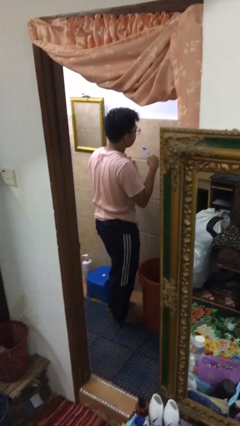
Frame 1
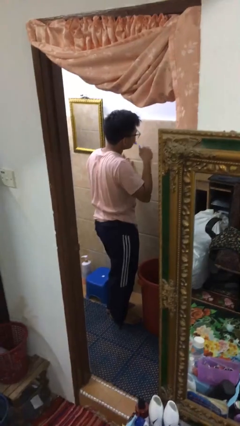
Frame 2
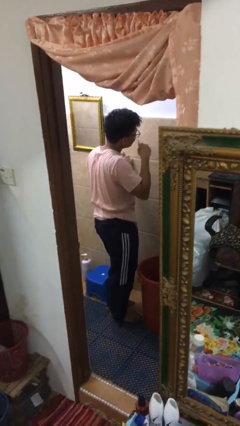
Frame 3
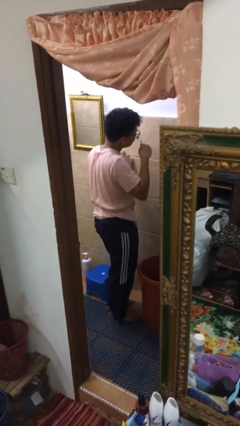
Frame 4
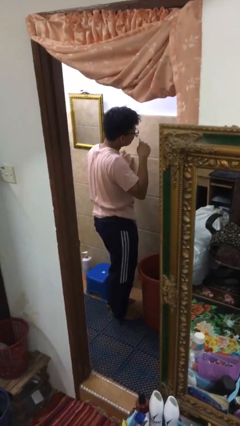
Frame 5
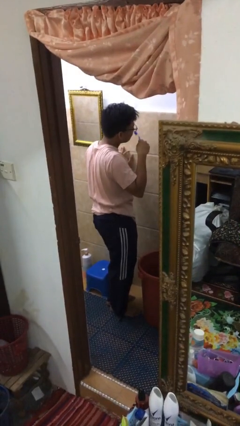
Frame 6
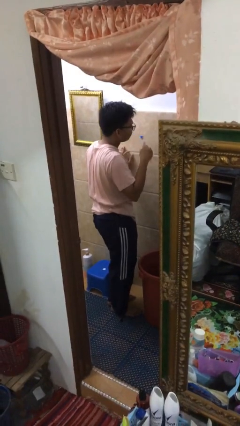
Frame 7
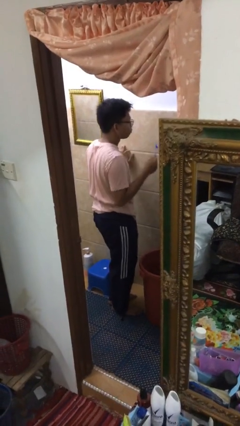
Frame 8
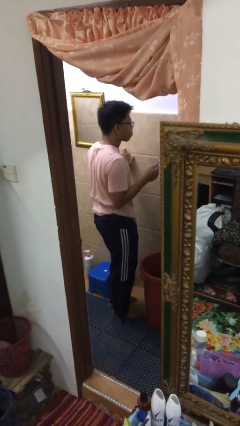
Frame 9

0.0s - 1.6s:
person brushes teeth

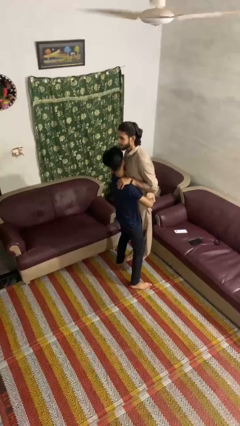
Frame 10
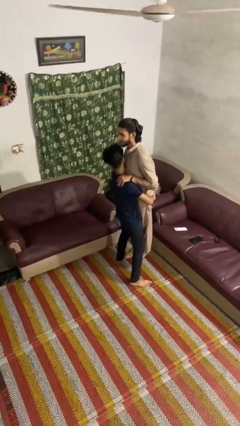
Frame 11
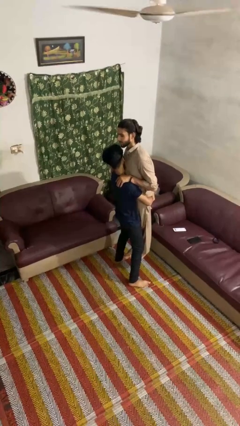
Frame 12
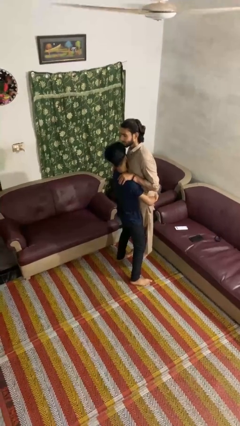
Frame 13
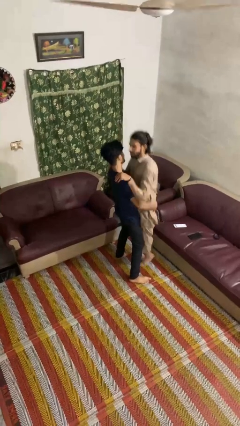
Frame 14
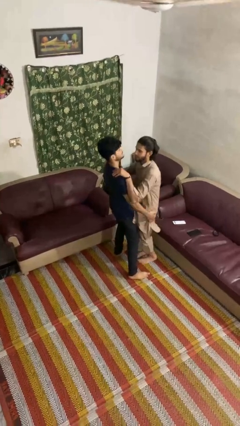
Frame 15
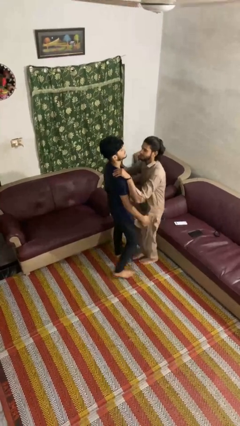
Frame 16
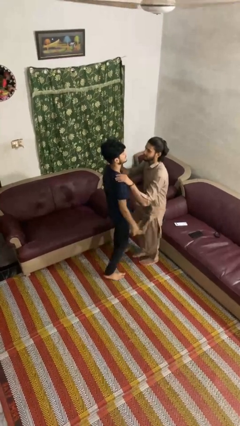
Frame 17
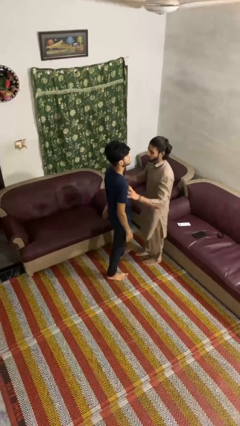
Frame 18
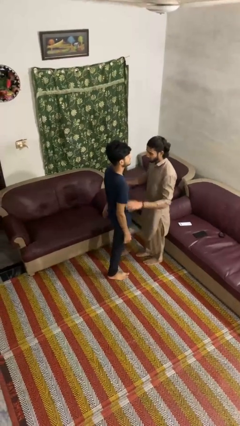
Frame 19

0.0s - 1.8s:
person puts down person

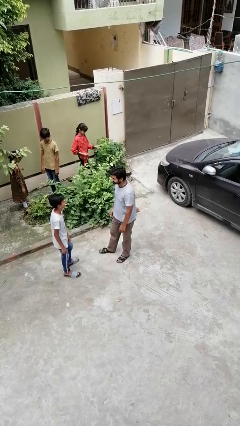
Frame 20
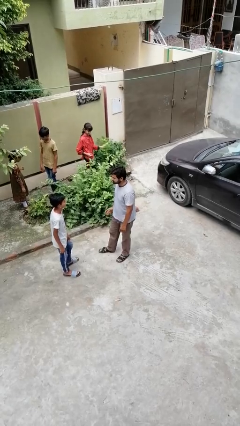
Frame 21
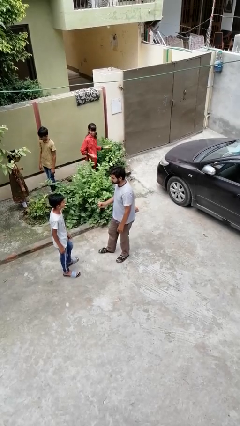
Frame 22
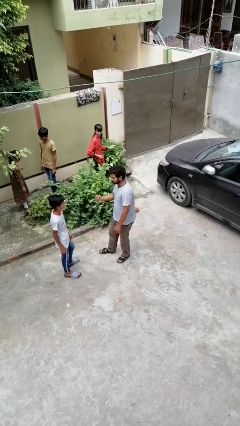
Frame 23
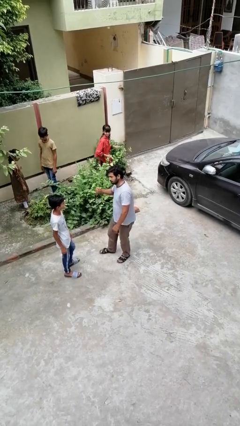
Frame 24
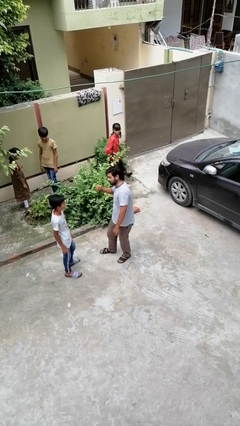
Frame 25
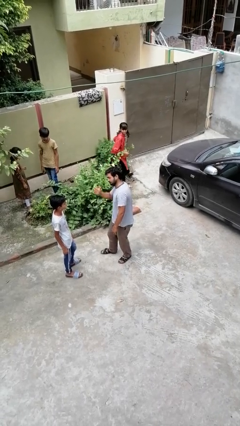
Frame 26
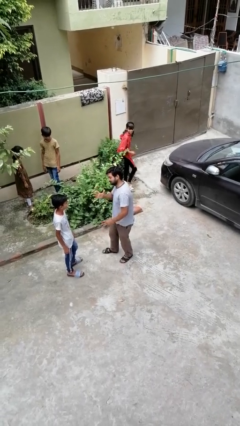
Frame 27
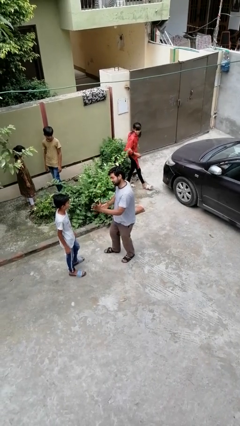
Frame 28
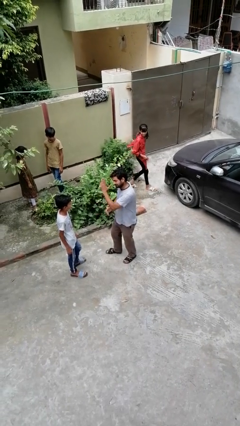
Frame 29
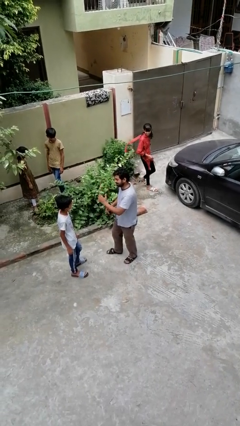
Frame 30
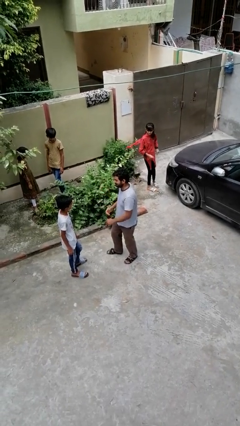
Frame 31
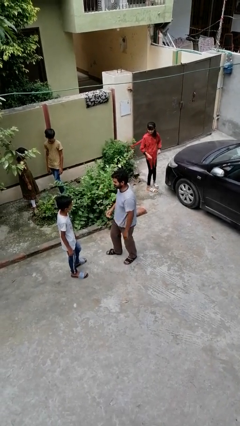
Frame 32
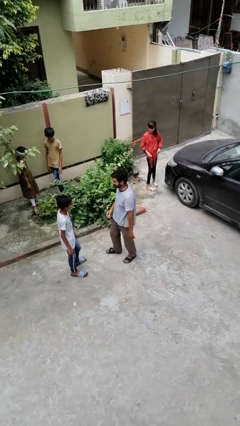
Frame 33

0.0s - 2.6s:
person talks to person

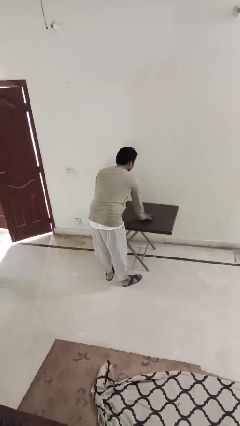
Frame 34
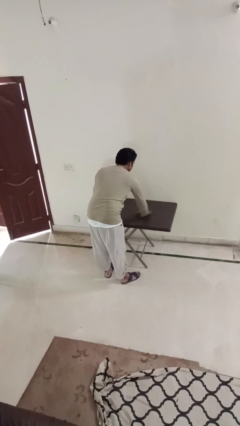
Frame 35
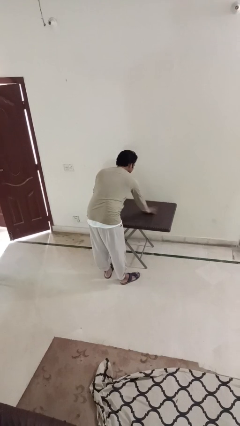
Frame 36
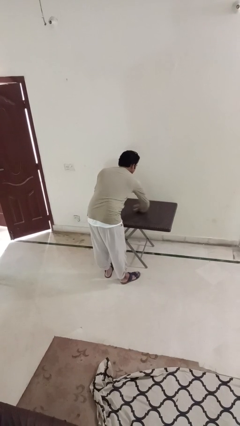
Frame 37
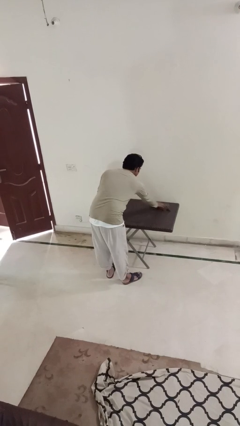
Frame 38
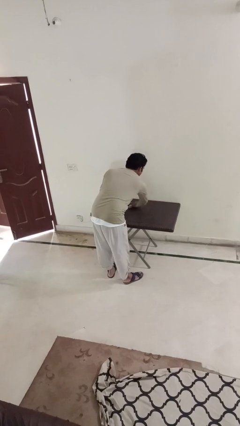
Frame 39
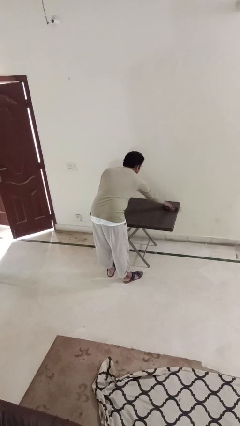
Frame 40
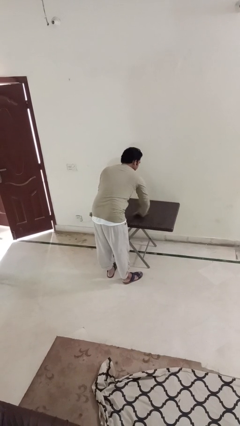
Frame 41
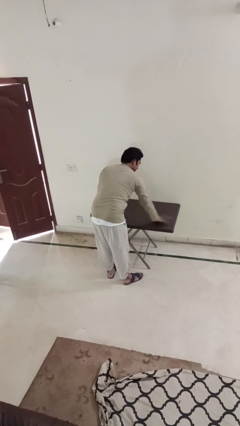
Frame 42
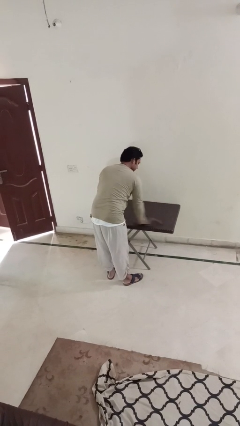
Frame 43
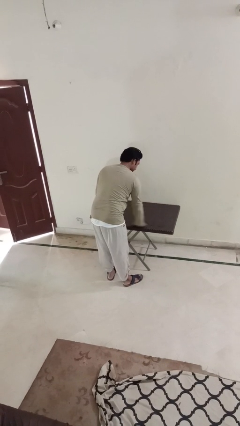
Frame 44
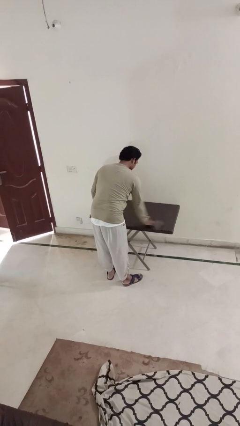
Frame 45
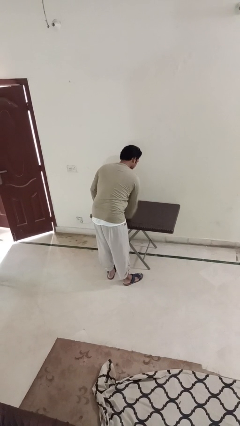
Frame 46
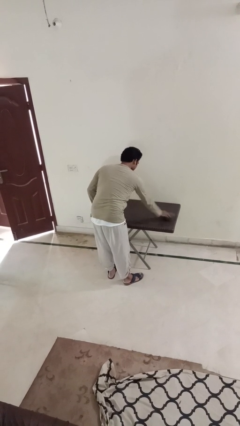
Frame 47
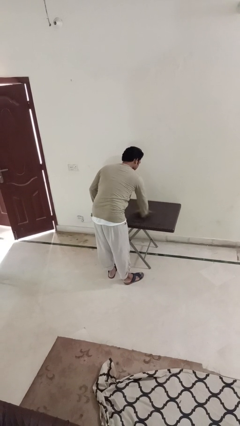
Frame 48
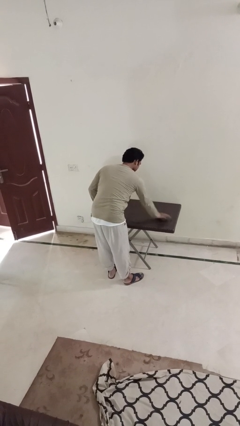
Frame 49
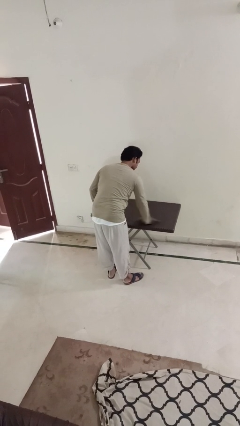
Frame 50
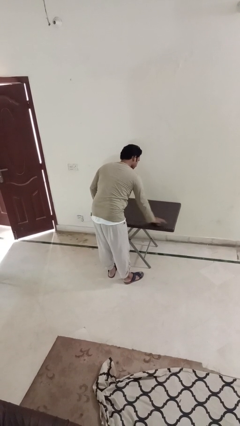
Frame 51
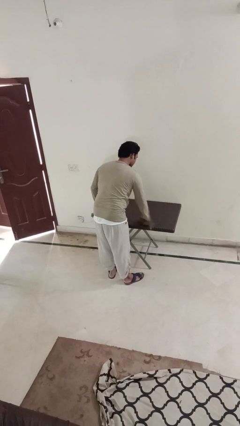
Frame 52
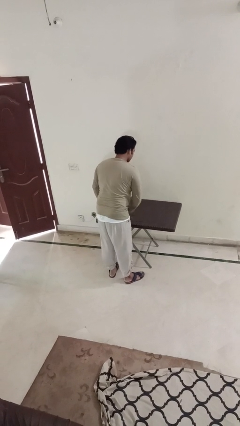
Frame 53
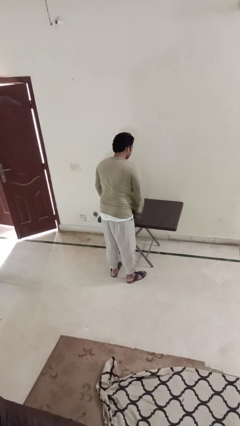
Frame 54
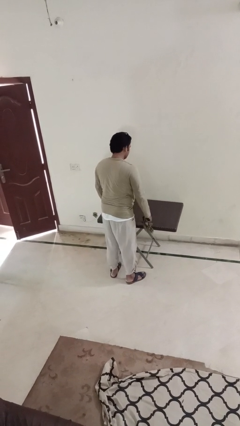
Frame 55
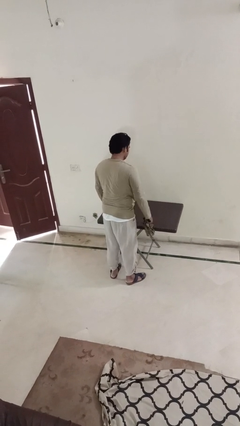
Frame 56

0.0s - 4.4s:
person cleans table with rag

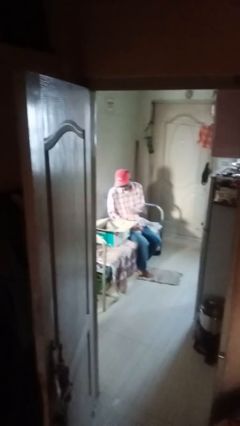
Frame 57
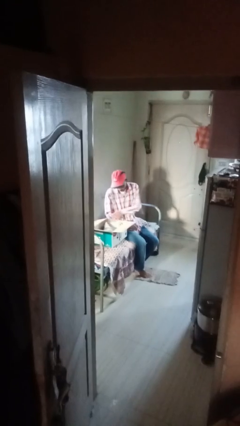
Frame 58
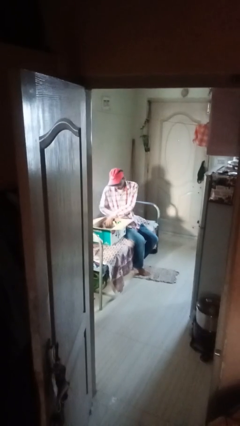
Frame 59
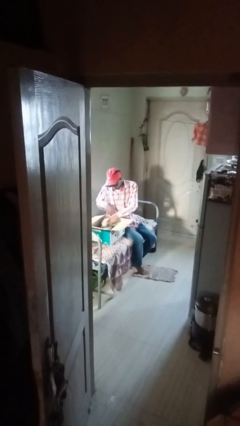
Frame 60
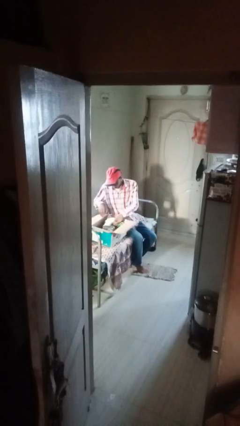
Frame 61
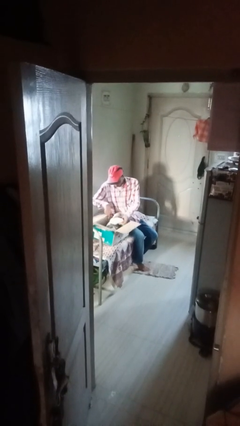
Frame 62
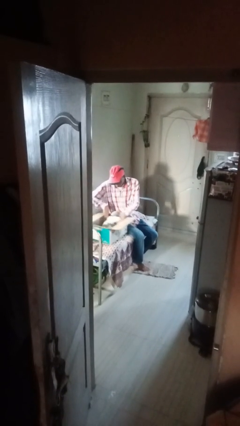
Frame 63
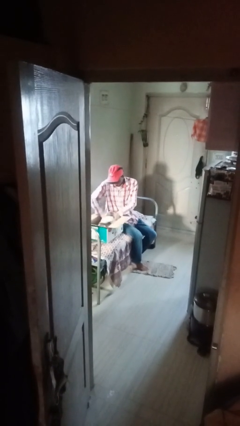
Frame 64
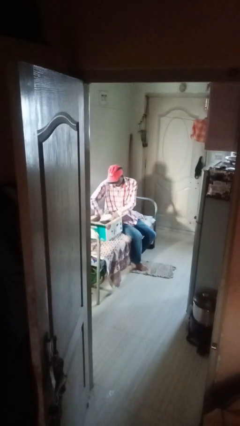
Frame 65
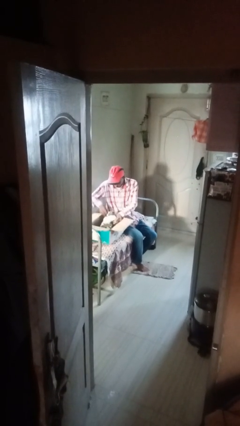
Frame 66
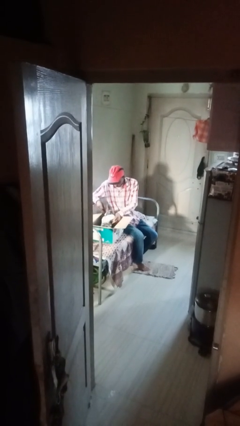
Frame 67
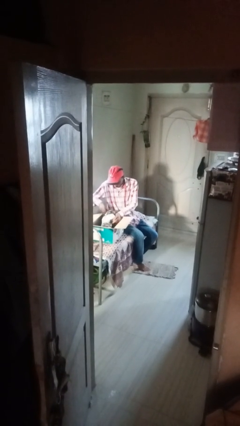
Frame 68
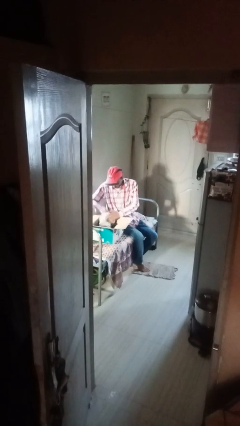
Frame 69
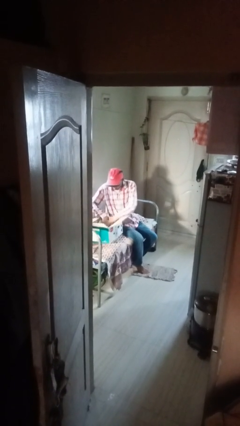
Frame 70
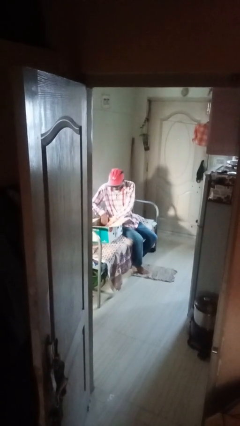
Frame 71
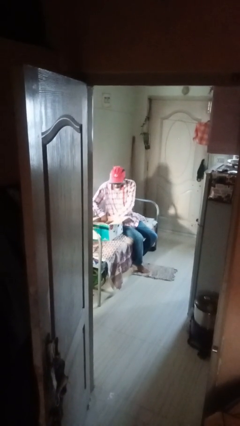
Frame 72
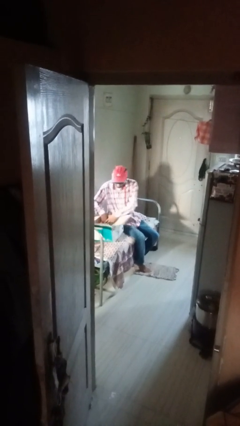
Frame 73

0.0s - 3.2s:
person searches in box

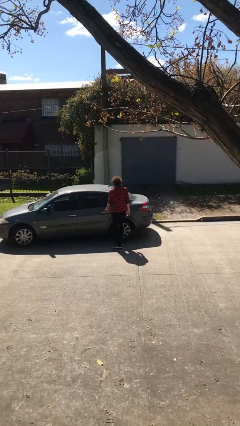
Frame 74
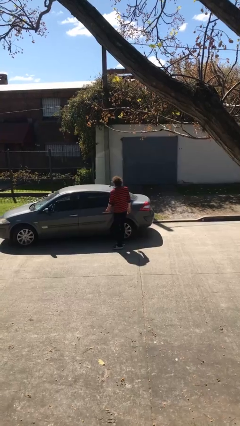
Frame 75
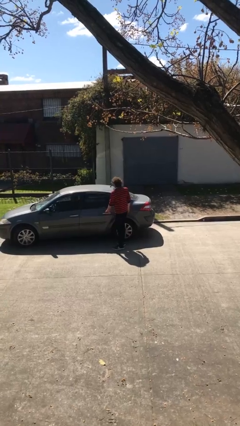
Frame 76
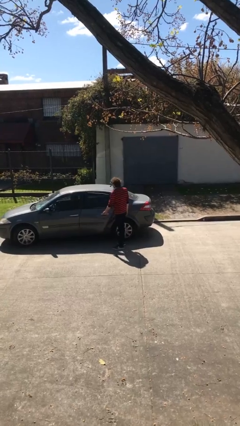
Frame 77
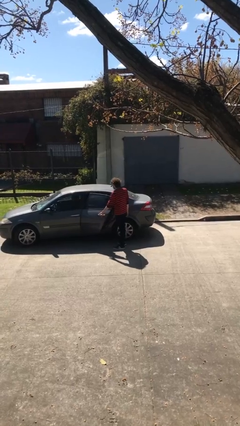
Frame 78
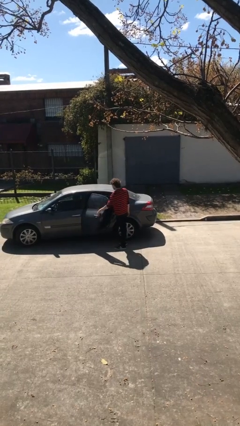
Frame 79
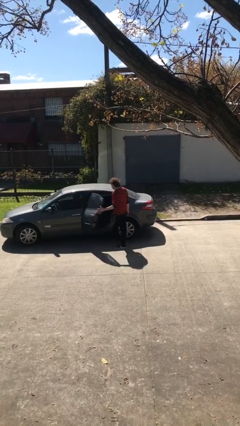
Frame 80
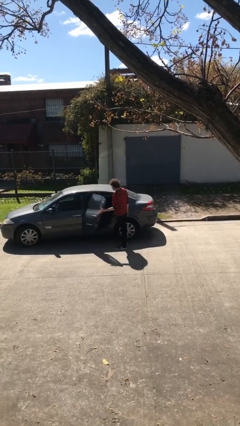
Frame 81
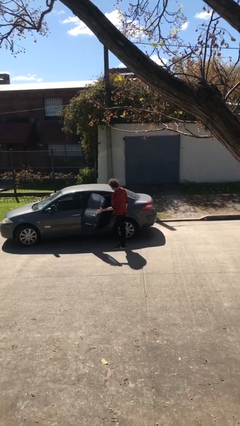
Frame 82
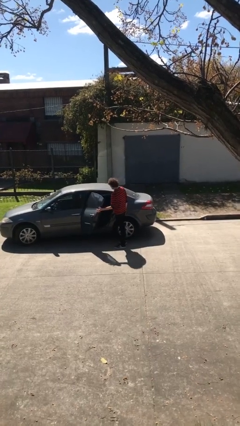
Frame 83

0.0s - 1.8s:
person opens car door

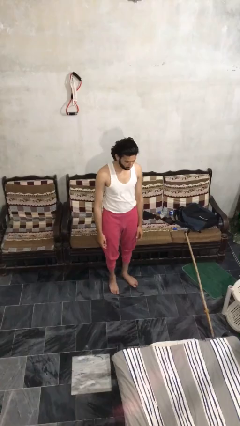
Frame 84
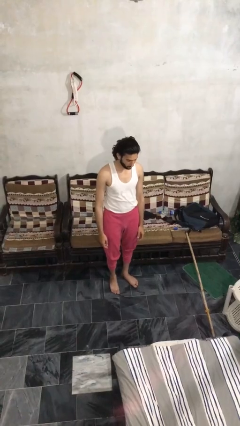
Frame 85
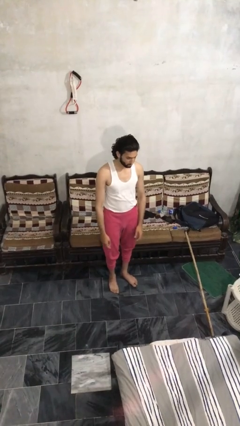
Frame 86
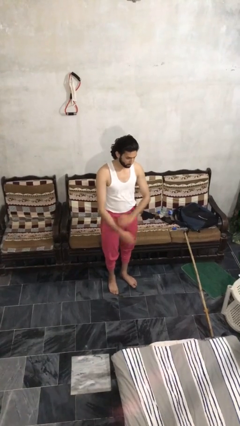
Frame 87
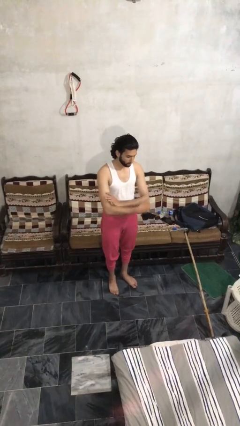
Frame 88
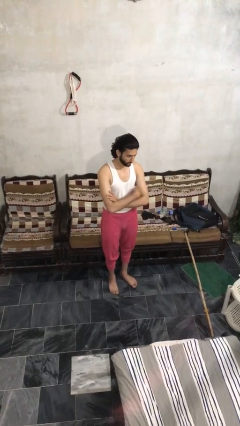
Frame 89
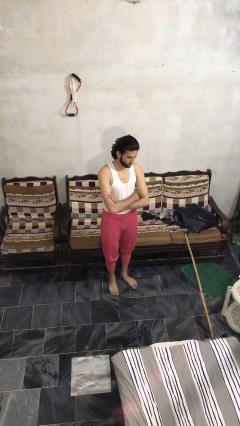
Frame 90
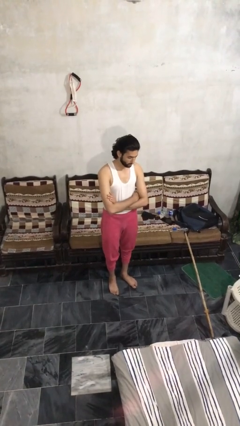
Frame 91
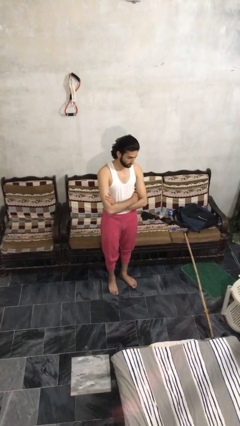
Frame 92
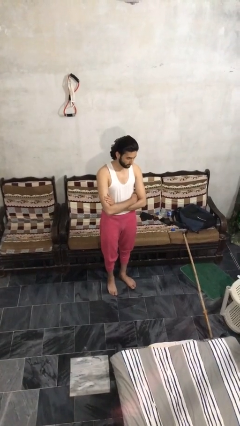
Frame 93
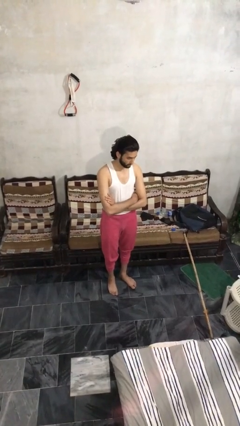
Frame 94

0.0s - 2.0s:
person crosses arms
